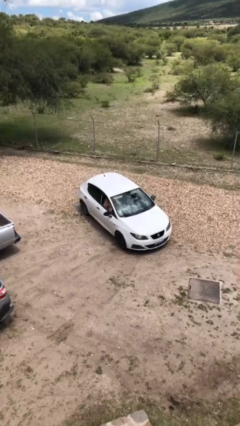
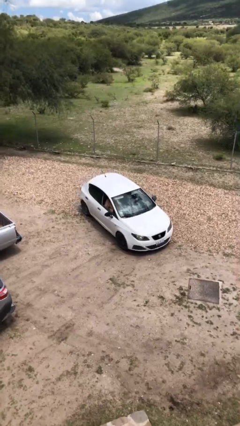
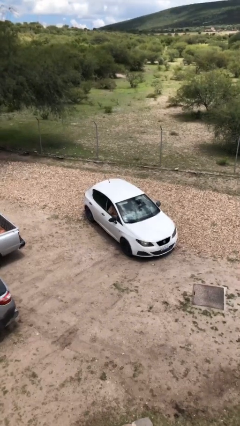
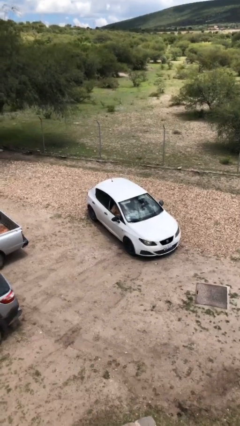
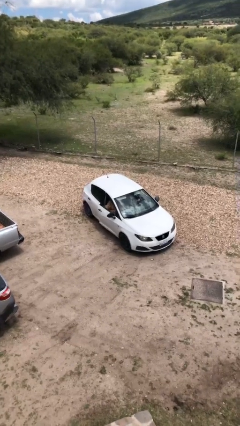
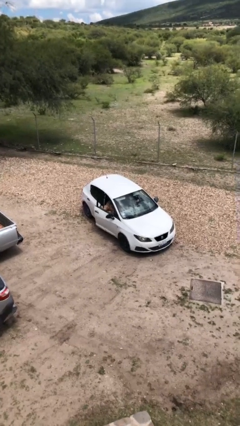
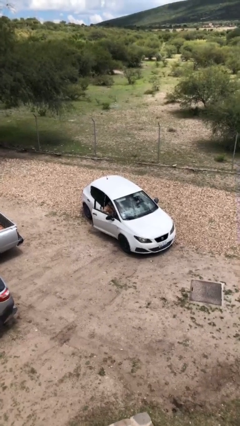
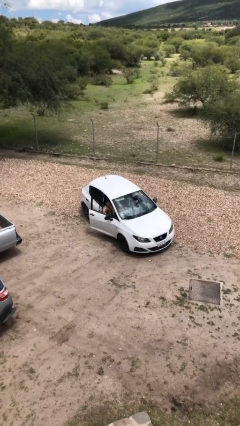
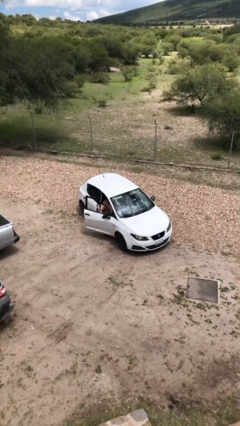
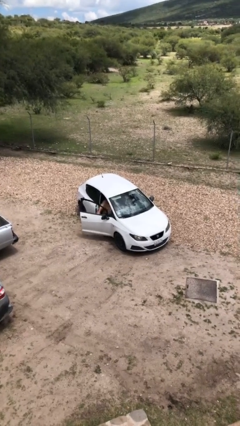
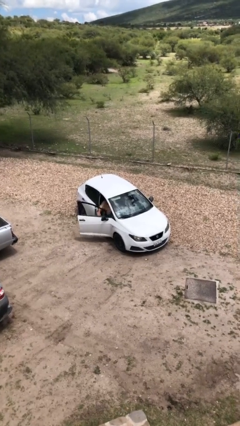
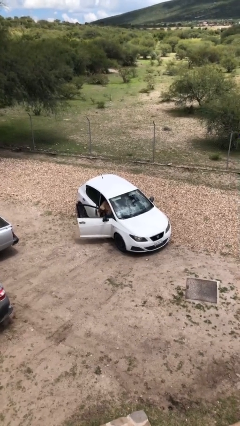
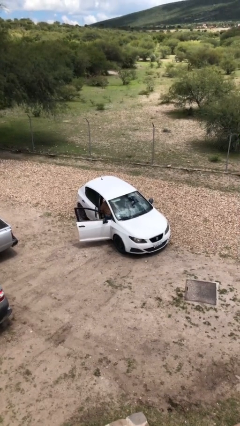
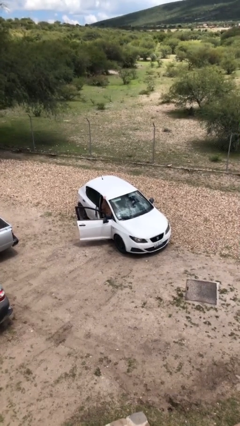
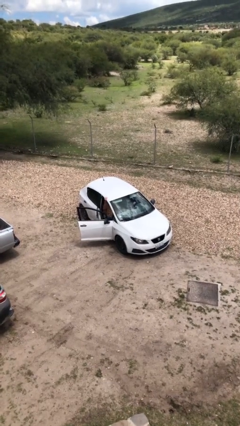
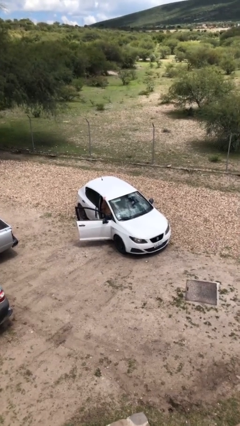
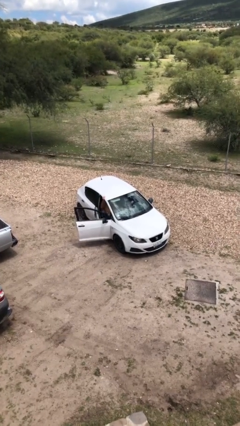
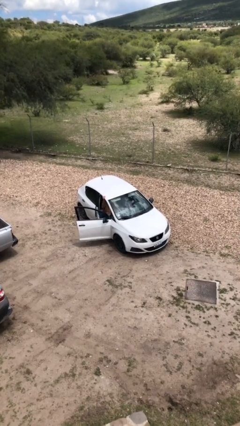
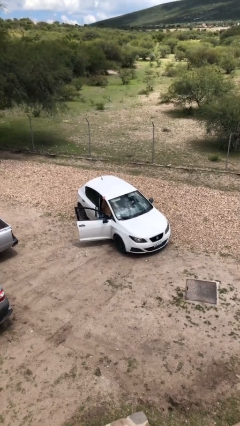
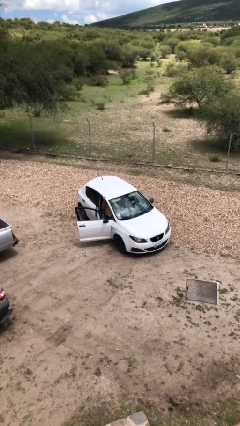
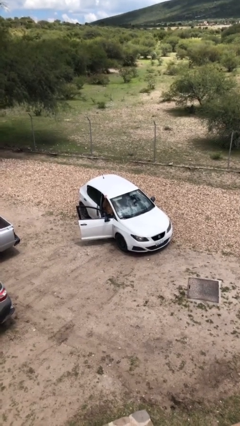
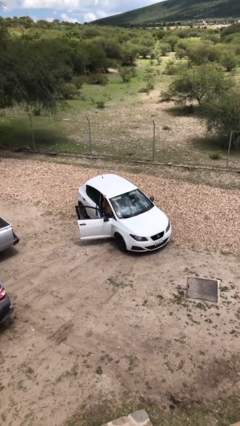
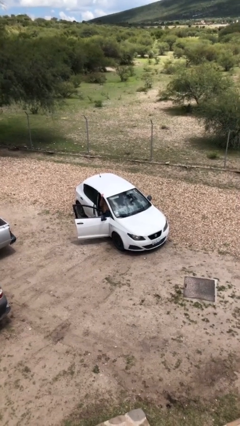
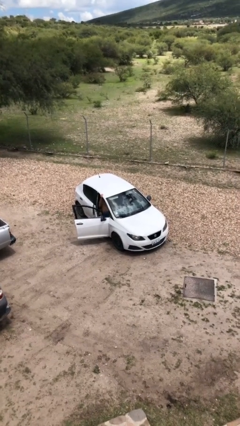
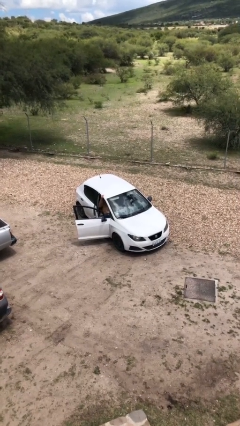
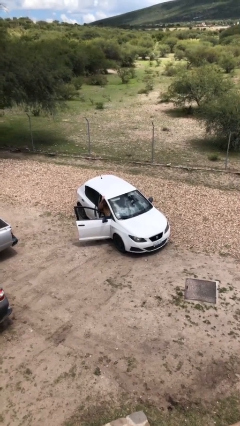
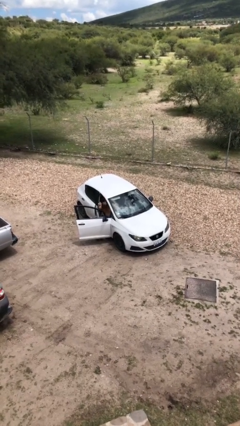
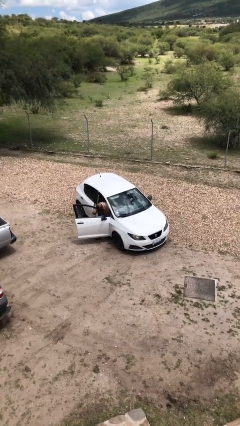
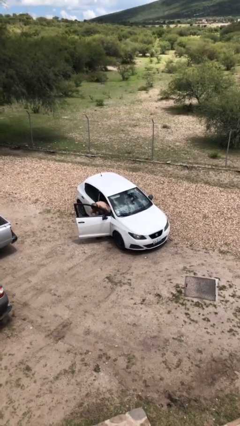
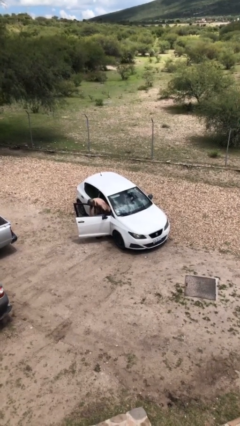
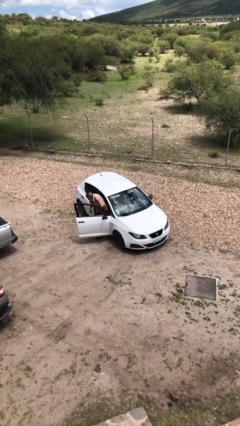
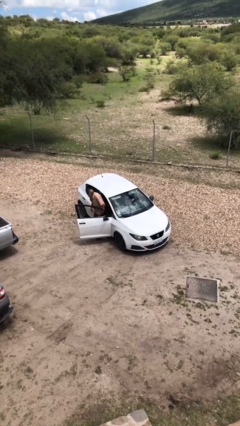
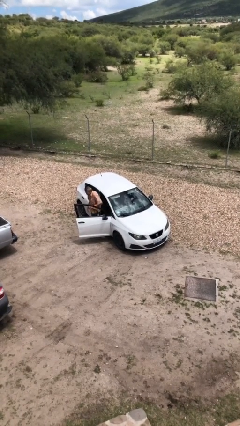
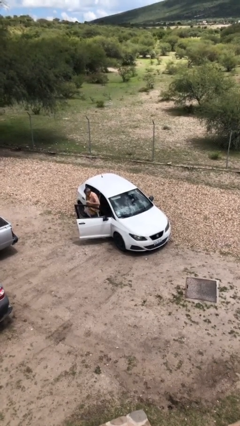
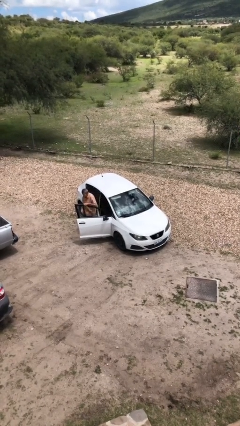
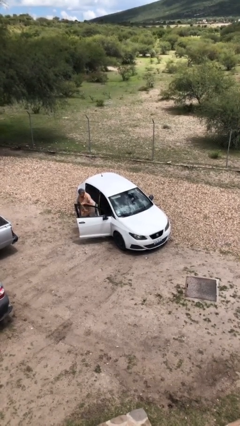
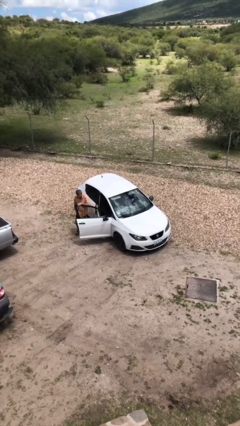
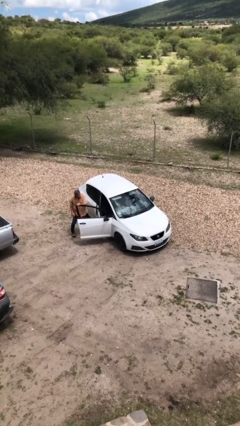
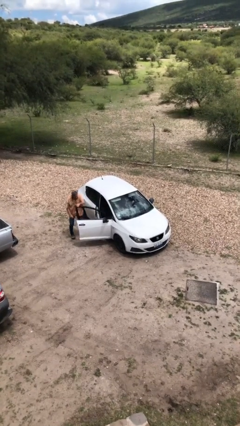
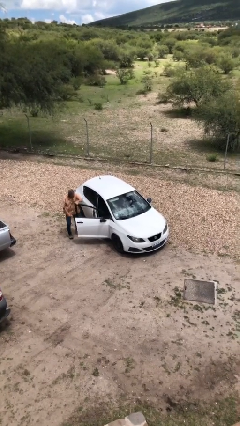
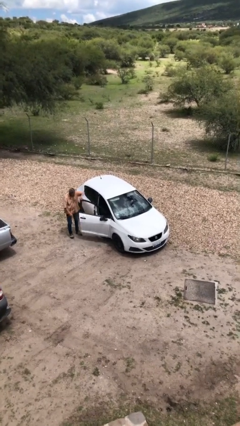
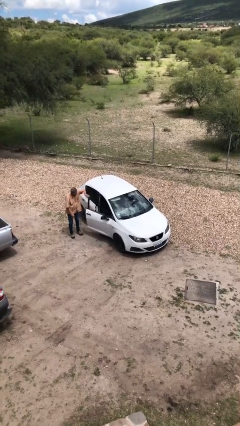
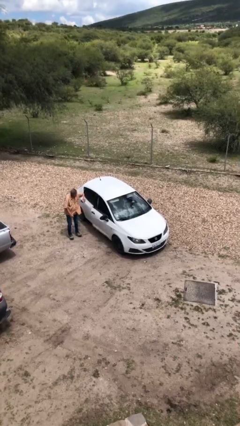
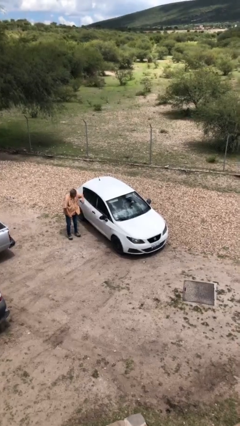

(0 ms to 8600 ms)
car drops off person

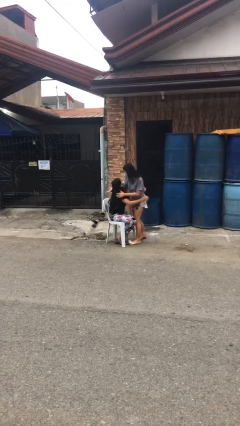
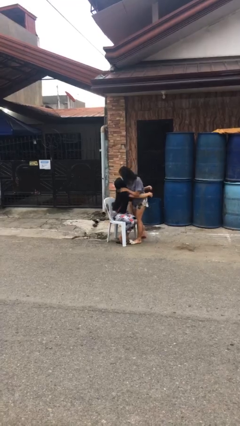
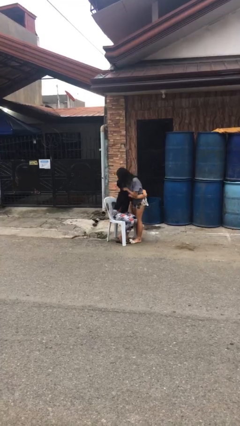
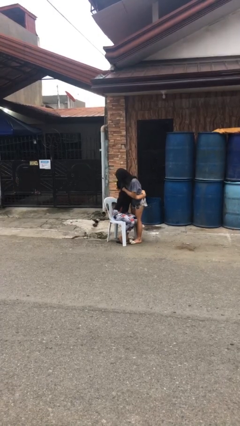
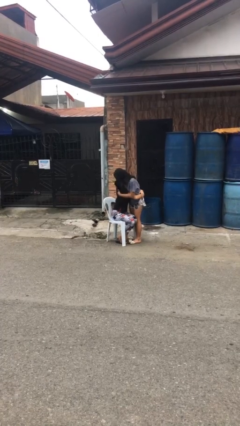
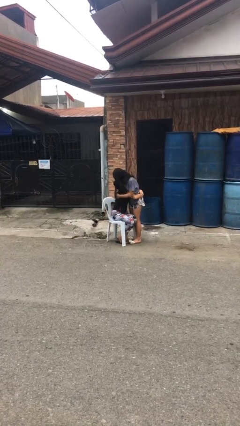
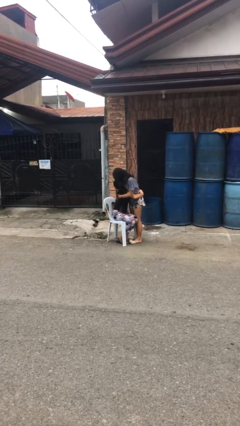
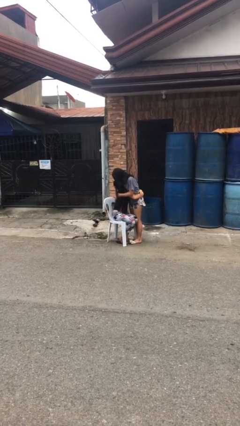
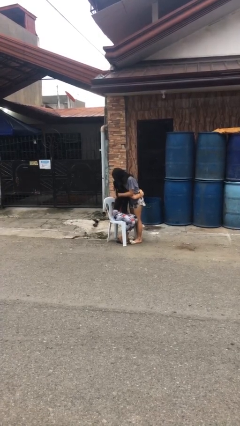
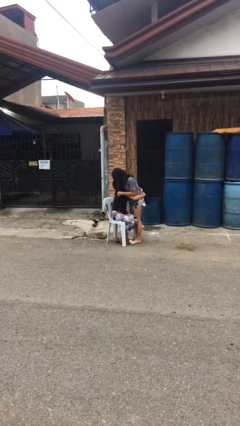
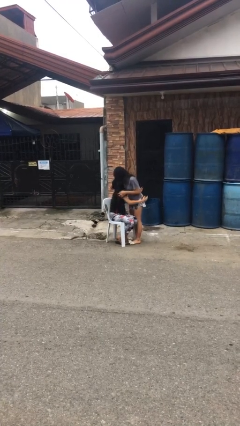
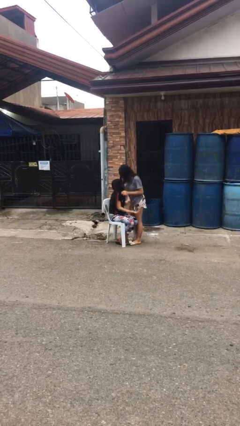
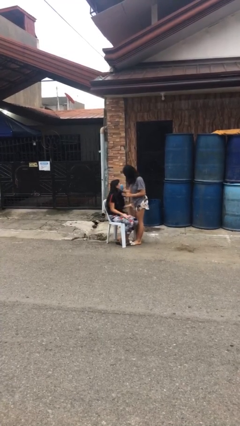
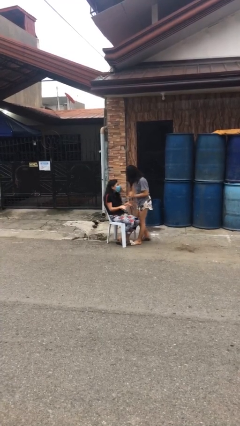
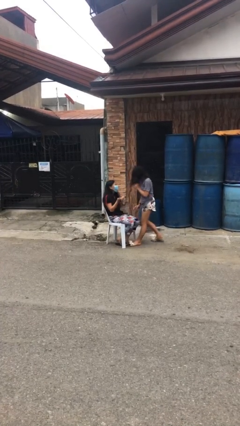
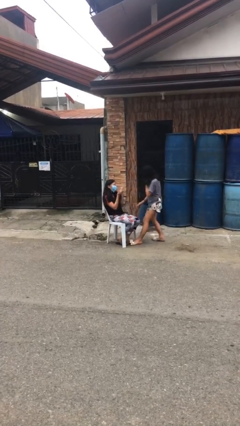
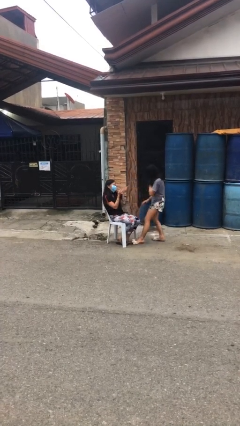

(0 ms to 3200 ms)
person embraces person

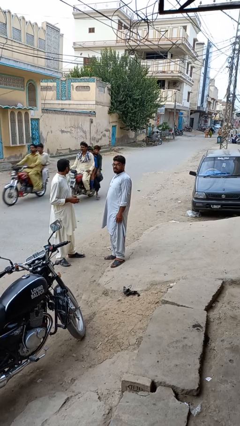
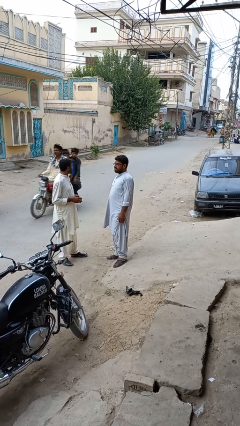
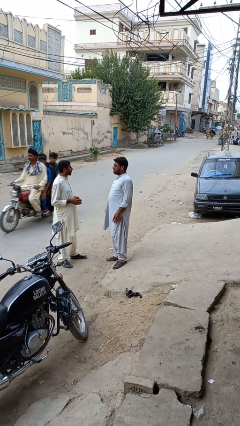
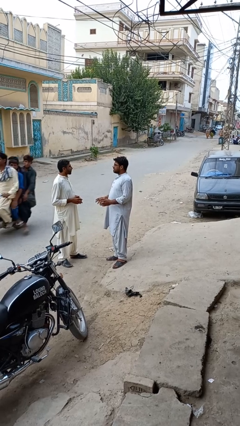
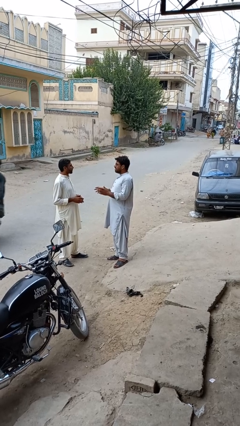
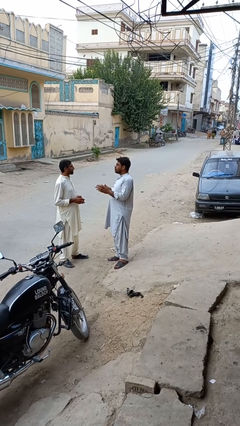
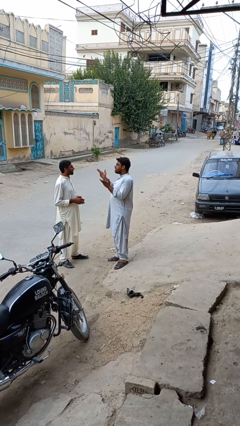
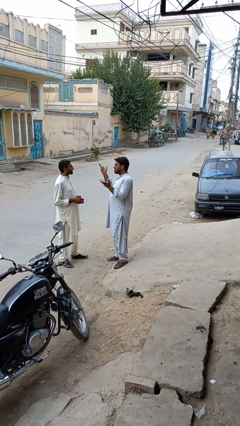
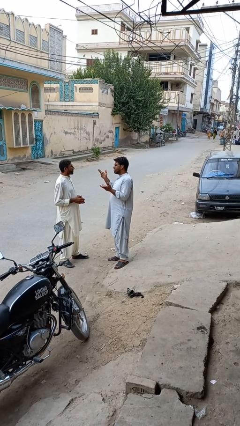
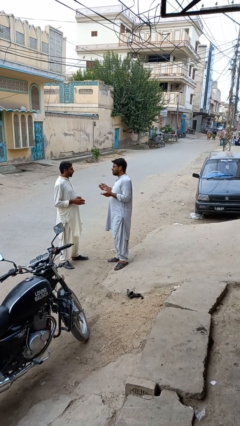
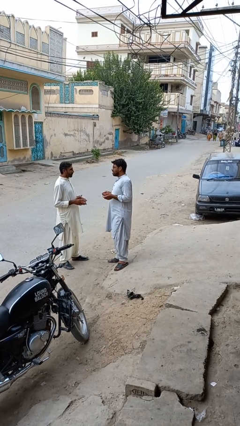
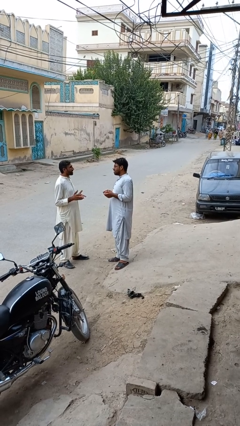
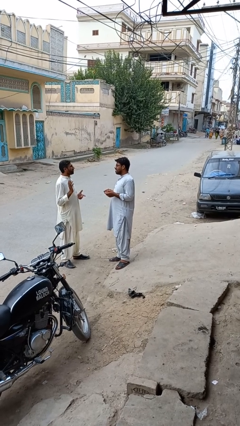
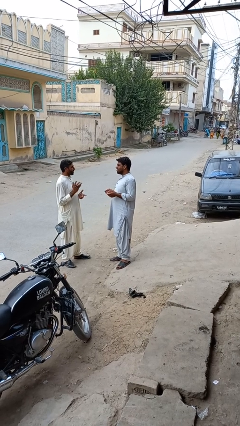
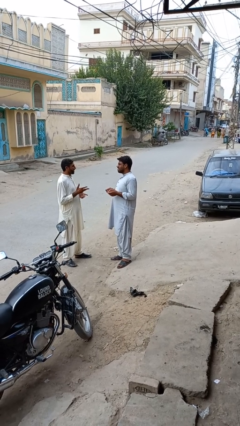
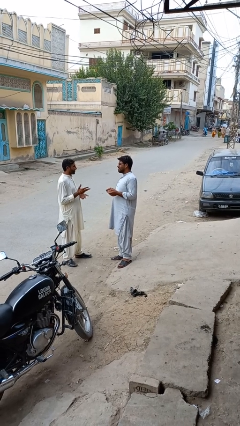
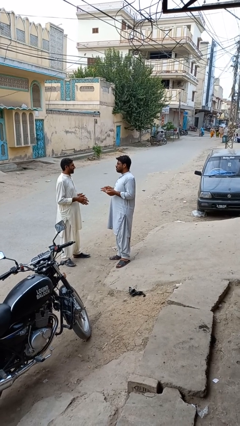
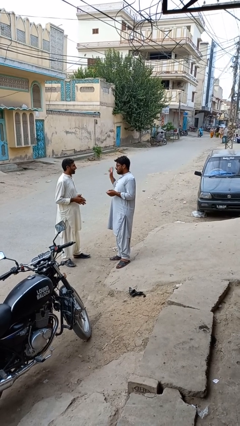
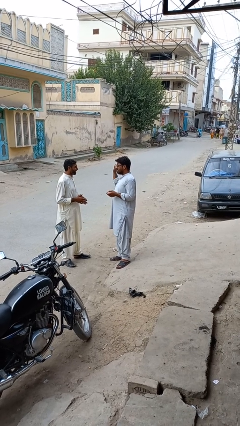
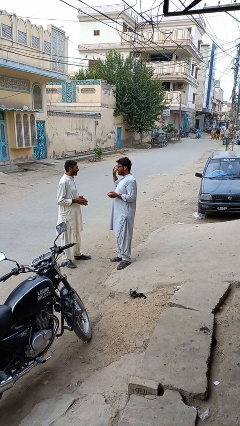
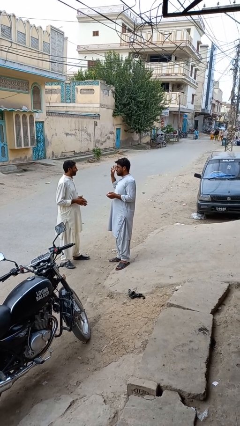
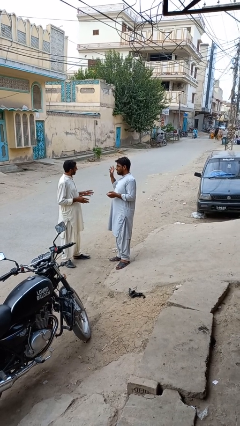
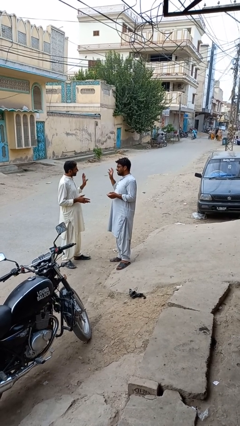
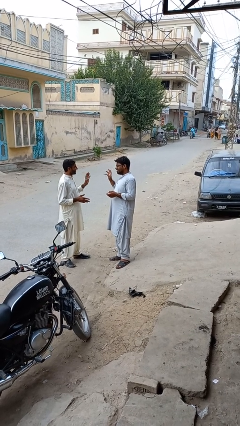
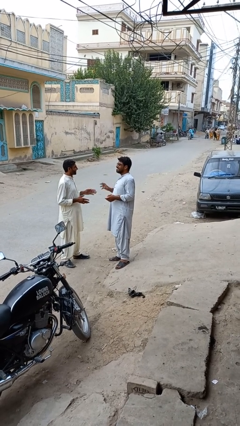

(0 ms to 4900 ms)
person talks to person

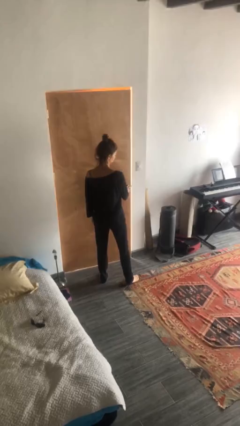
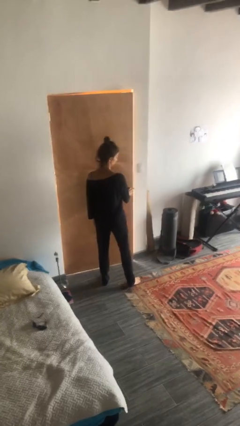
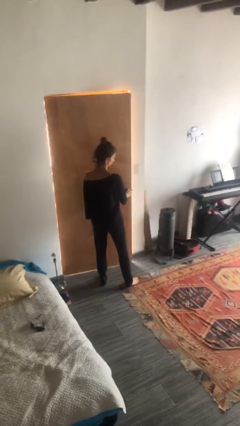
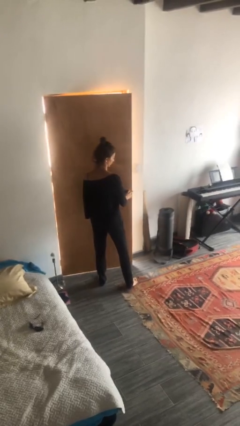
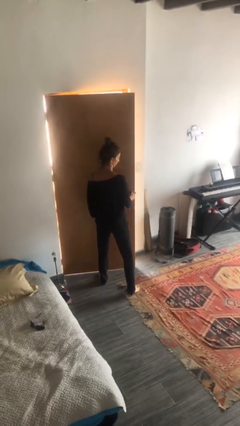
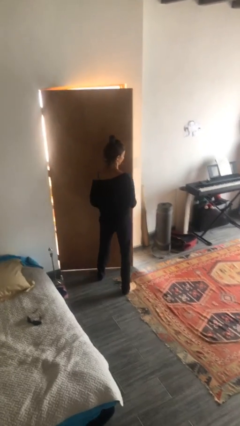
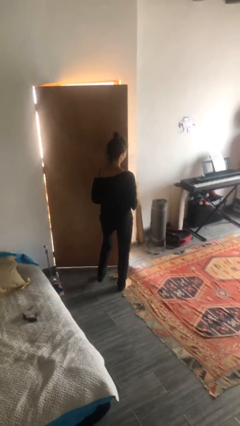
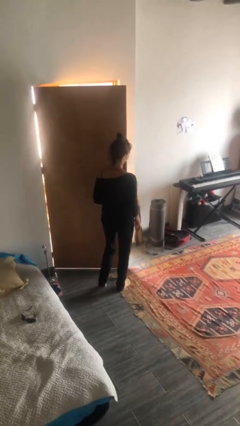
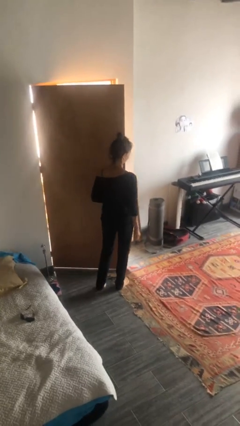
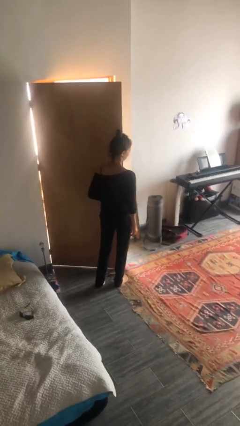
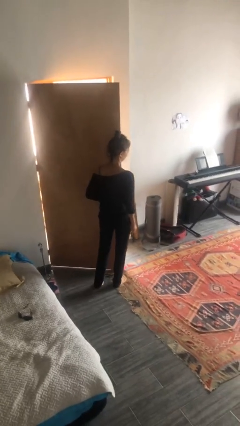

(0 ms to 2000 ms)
person opens facility door
